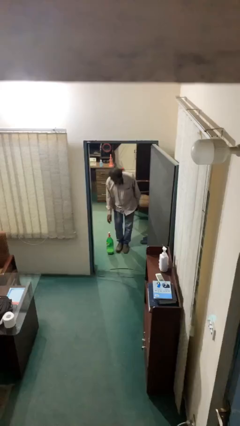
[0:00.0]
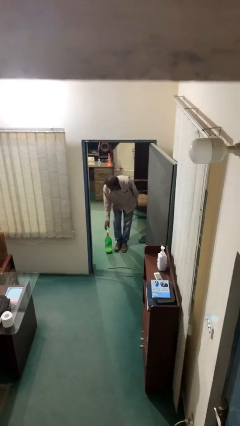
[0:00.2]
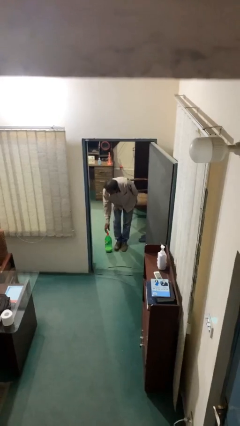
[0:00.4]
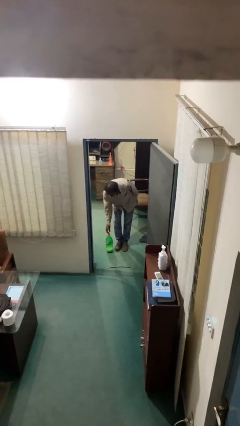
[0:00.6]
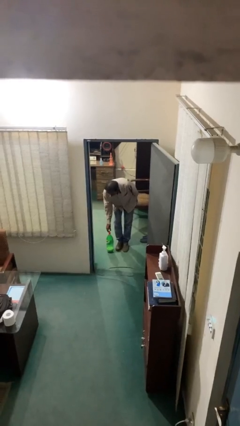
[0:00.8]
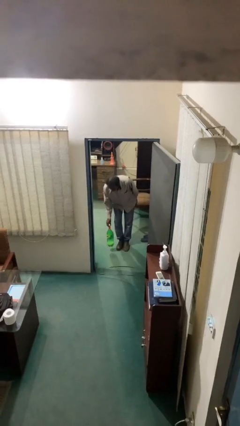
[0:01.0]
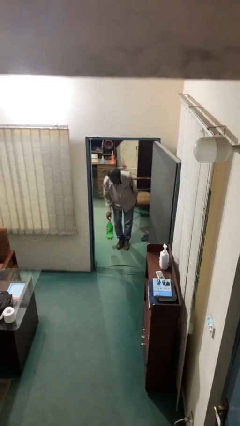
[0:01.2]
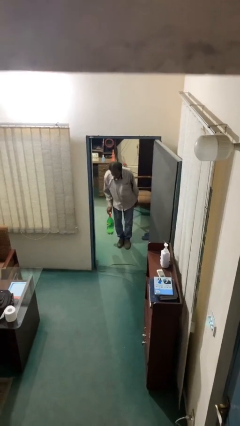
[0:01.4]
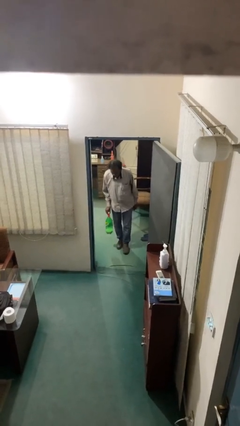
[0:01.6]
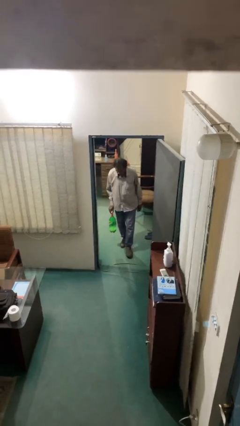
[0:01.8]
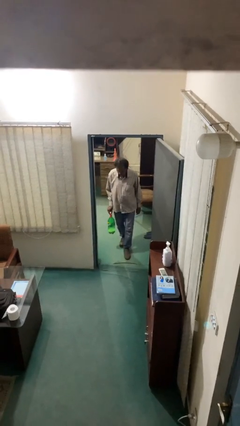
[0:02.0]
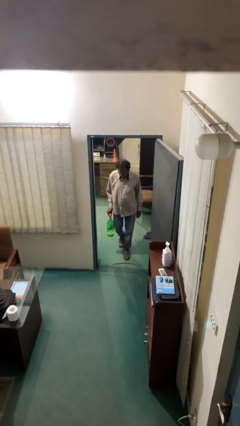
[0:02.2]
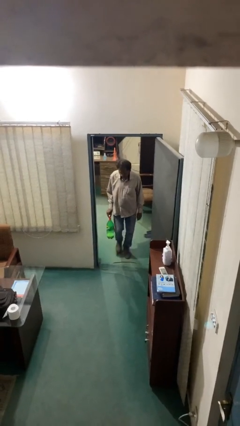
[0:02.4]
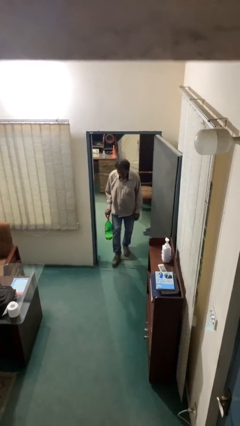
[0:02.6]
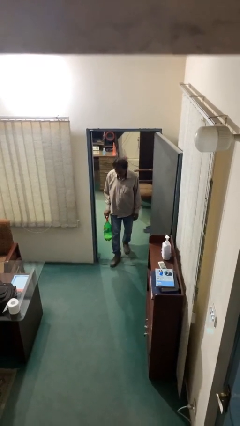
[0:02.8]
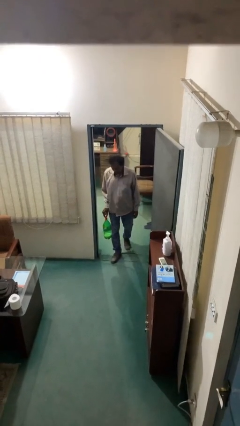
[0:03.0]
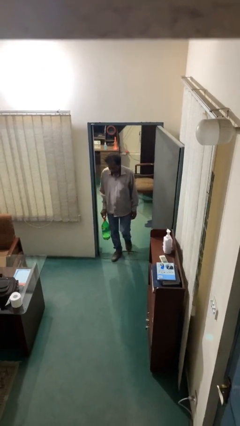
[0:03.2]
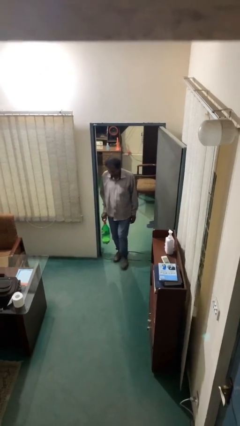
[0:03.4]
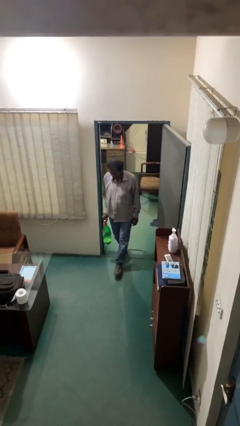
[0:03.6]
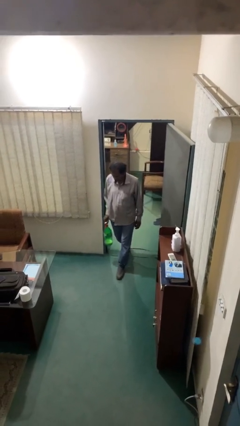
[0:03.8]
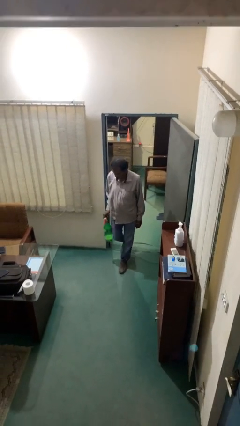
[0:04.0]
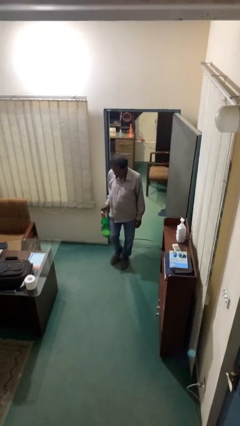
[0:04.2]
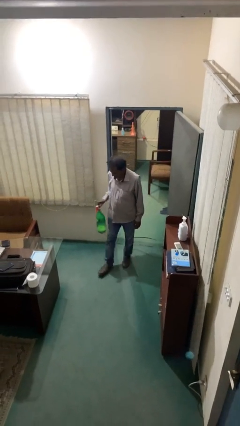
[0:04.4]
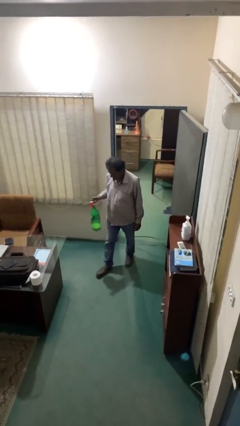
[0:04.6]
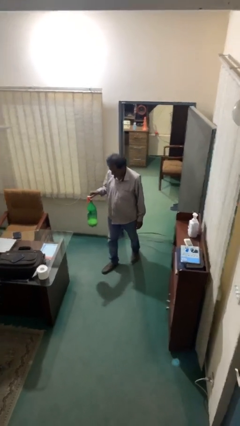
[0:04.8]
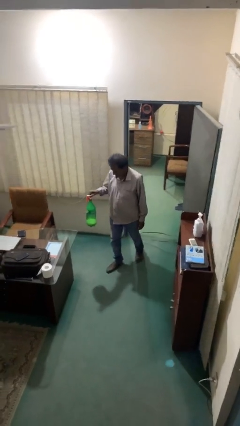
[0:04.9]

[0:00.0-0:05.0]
person picks up object from floor

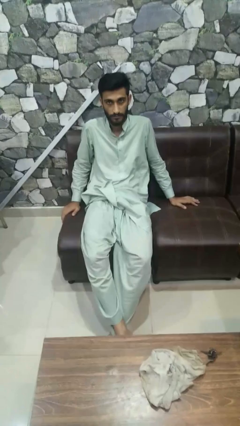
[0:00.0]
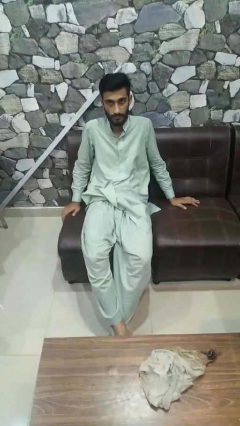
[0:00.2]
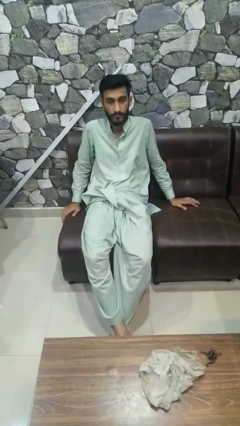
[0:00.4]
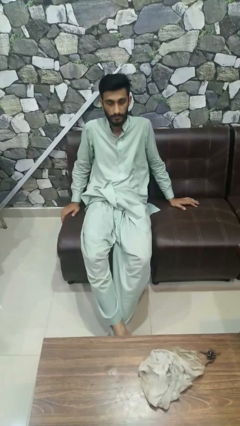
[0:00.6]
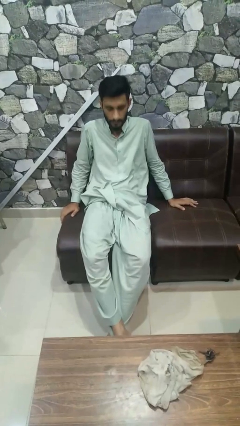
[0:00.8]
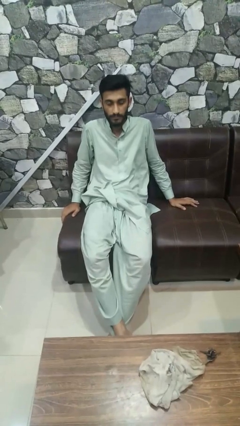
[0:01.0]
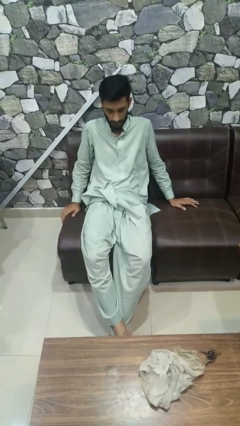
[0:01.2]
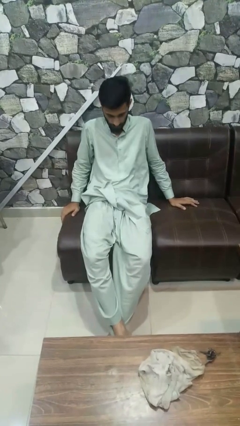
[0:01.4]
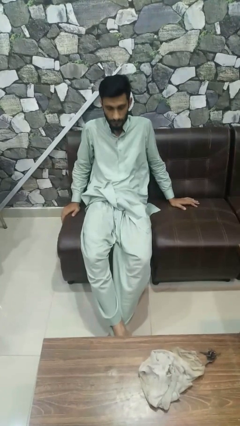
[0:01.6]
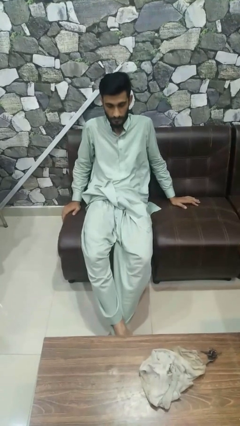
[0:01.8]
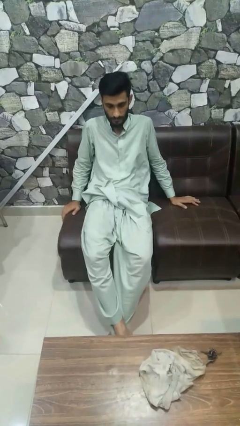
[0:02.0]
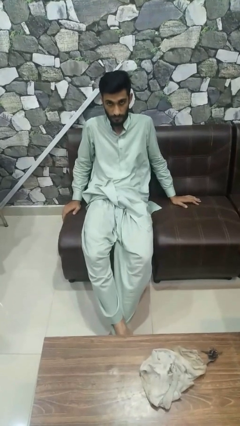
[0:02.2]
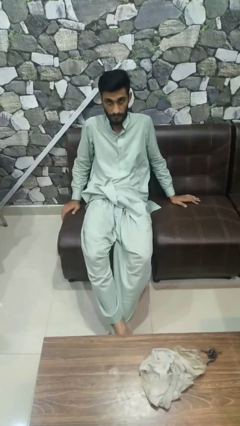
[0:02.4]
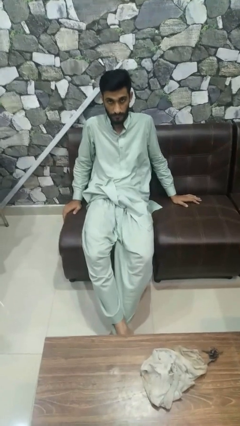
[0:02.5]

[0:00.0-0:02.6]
person nods head

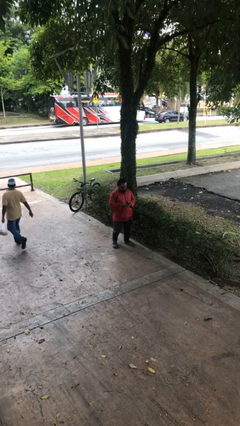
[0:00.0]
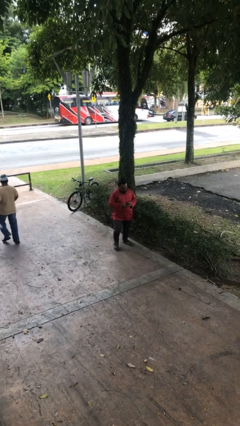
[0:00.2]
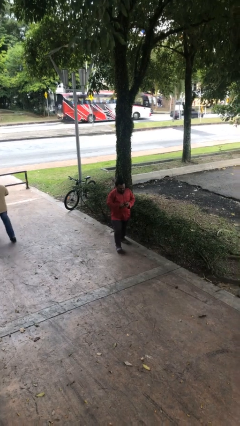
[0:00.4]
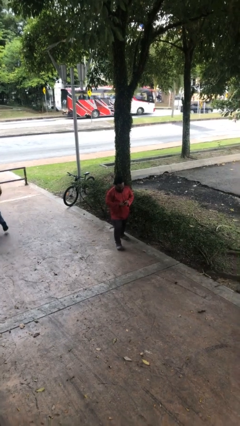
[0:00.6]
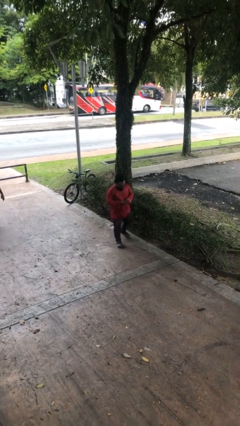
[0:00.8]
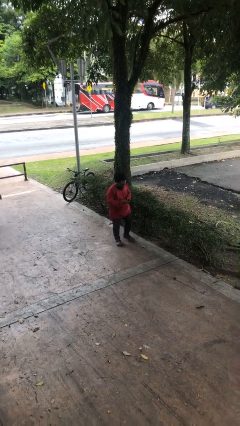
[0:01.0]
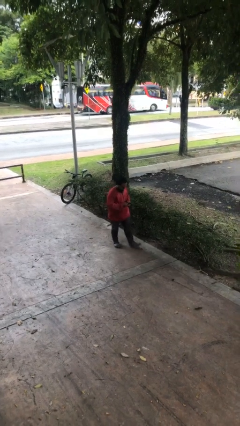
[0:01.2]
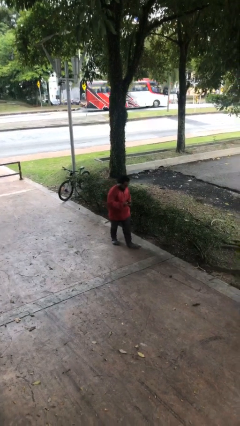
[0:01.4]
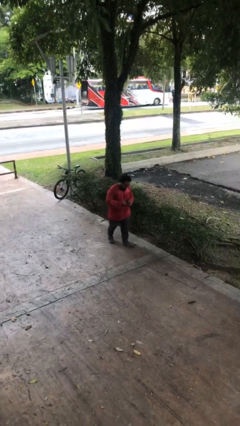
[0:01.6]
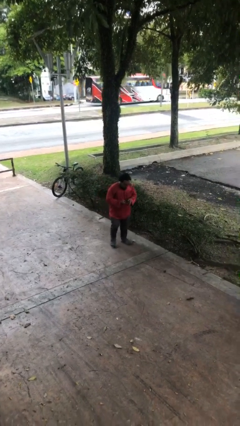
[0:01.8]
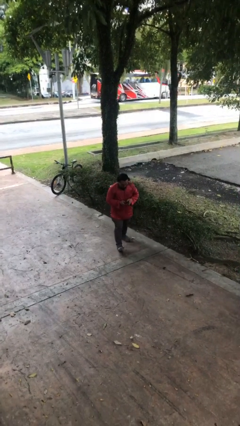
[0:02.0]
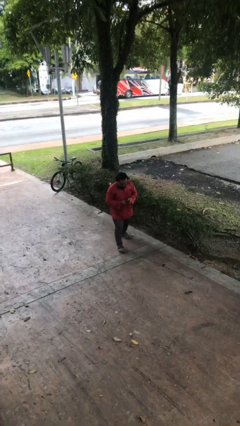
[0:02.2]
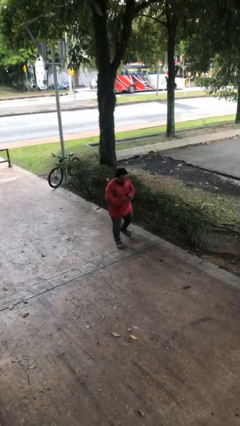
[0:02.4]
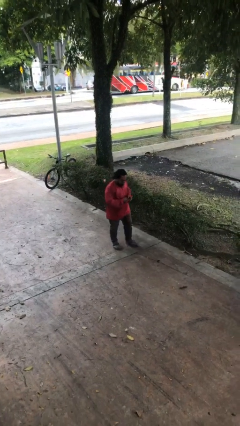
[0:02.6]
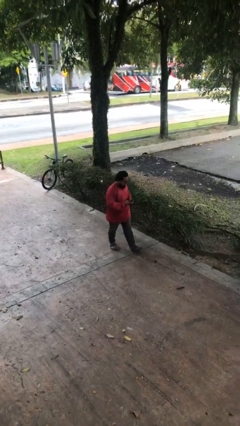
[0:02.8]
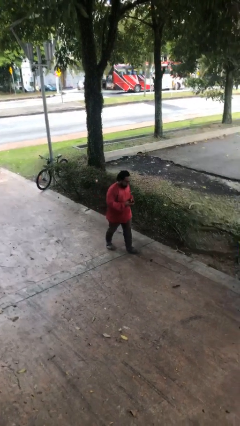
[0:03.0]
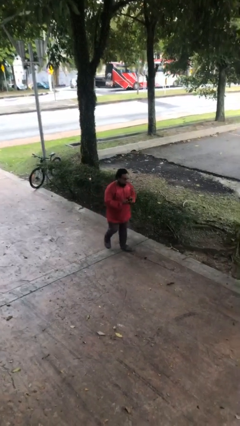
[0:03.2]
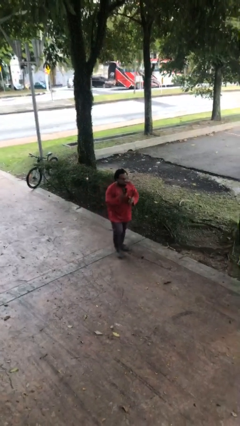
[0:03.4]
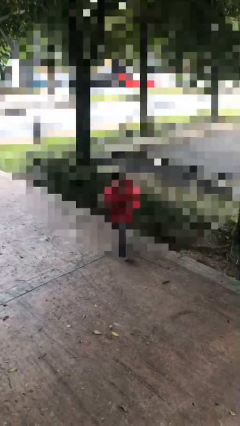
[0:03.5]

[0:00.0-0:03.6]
person texts on phone

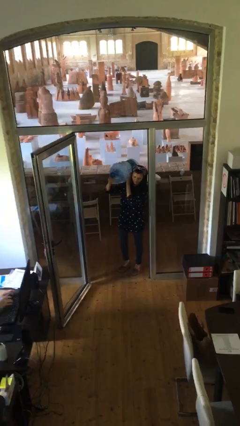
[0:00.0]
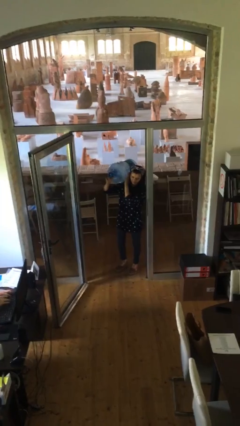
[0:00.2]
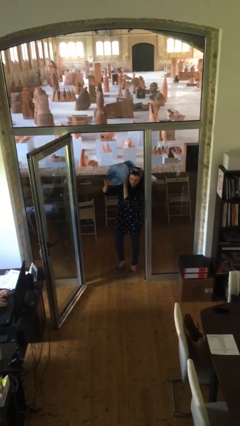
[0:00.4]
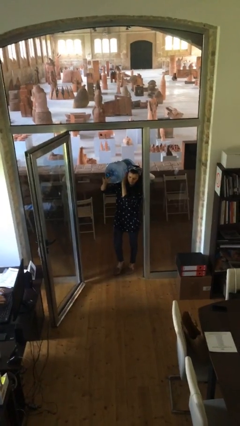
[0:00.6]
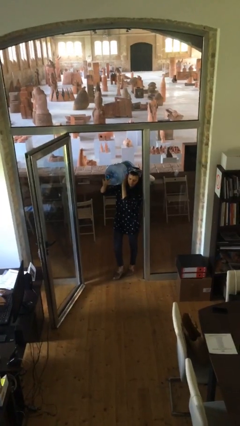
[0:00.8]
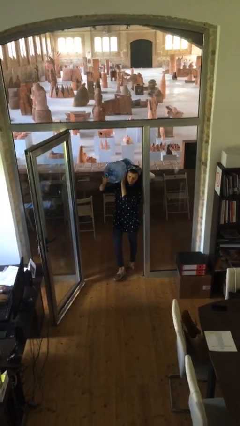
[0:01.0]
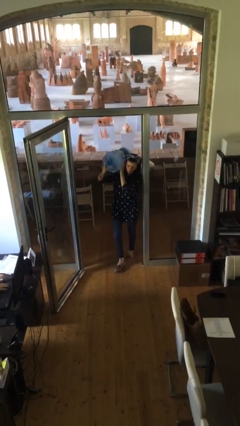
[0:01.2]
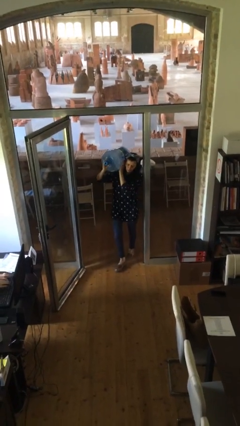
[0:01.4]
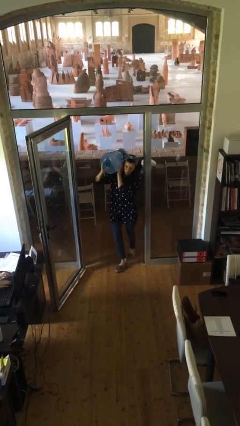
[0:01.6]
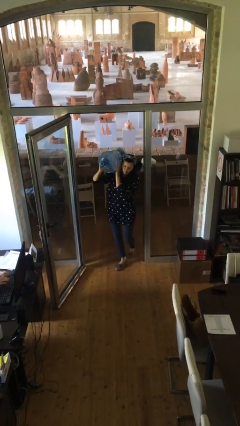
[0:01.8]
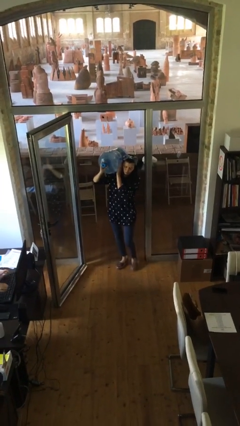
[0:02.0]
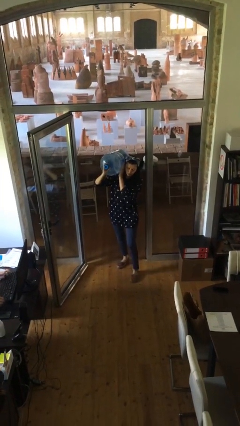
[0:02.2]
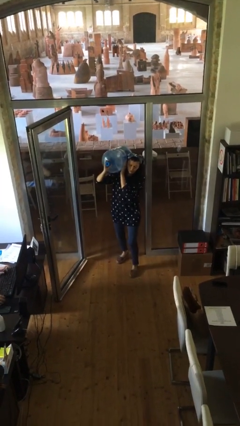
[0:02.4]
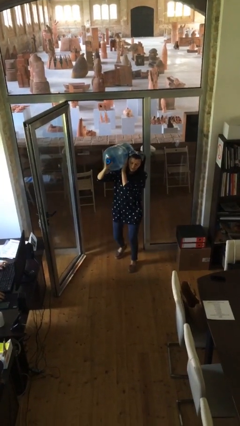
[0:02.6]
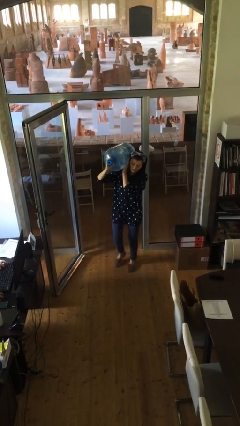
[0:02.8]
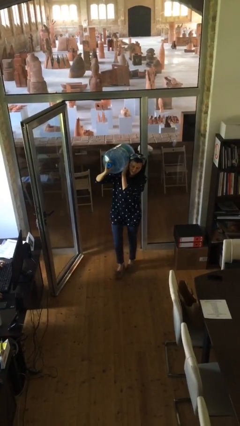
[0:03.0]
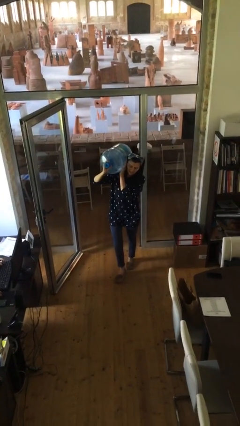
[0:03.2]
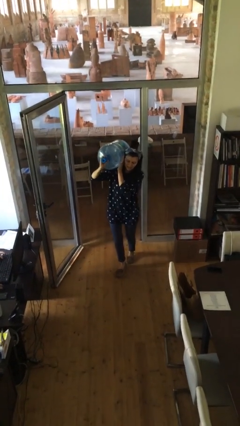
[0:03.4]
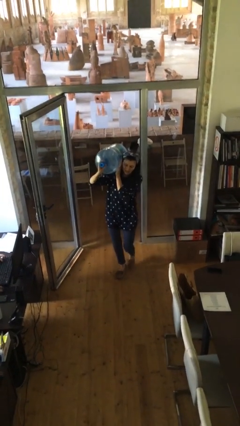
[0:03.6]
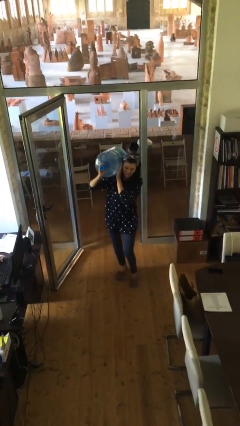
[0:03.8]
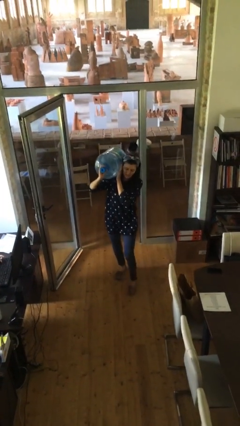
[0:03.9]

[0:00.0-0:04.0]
person carries heavy object

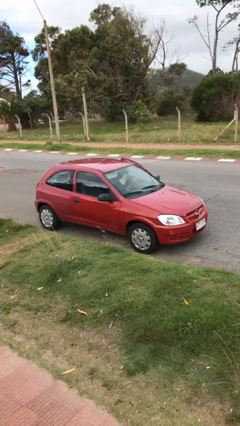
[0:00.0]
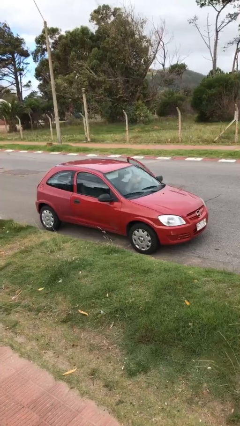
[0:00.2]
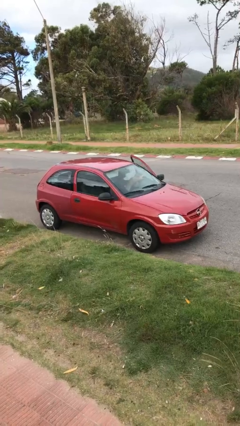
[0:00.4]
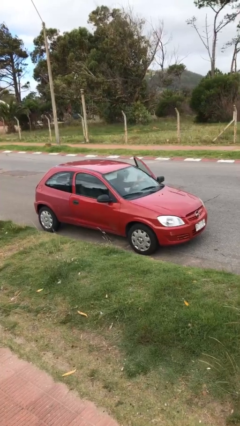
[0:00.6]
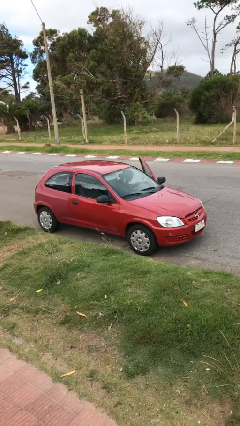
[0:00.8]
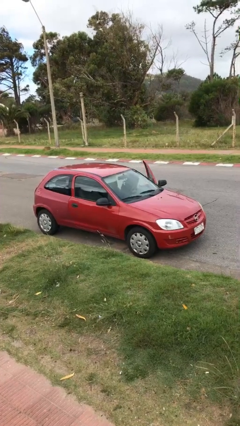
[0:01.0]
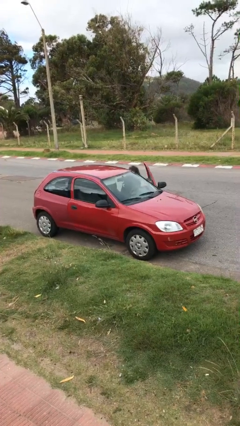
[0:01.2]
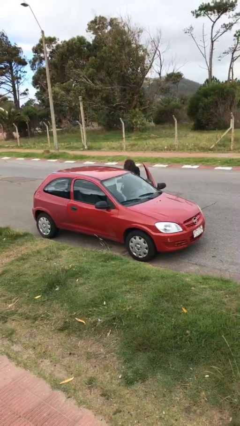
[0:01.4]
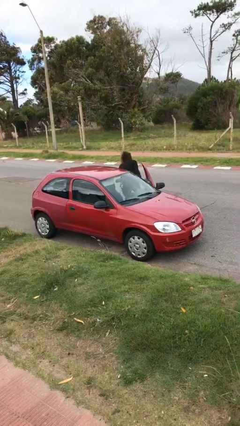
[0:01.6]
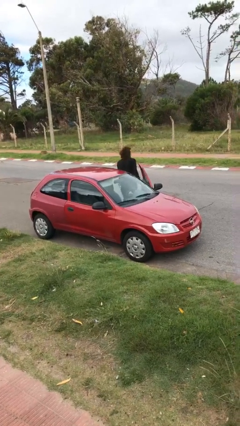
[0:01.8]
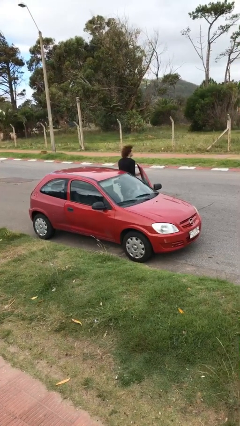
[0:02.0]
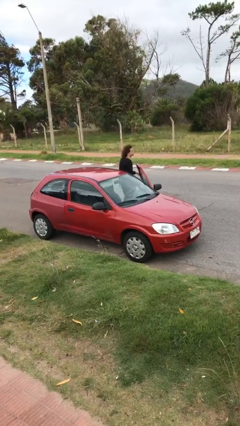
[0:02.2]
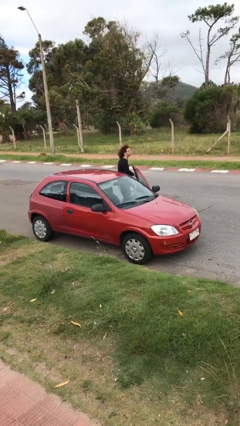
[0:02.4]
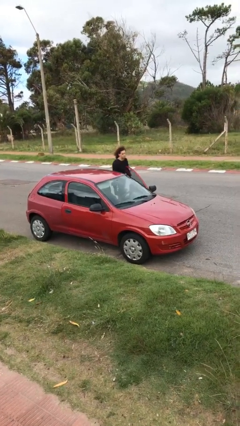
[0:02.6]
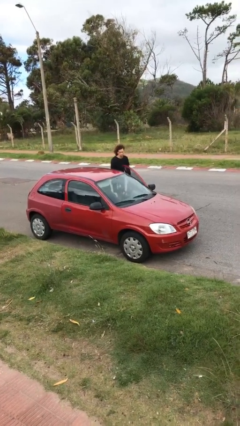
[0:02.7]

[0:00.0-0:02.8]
car drops off person
